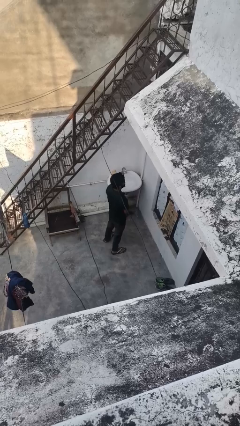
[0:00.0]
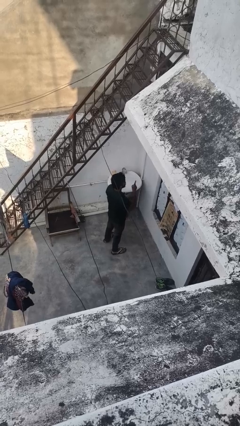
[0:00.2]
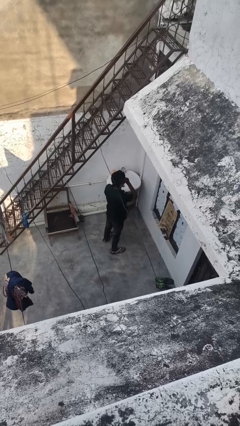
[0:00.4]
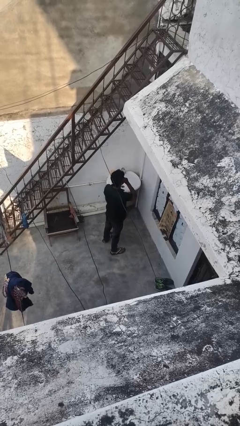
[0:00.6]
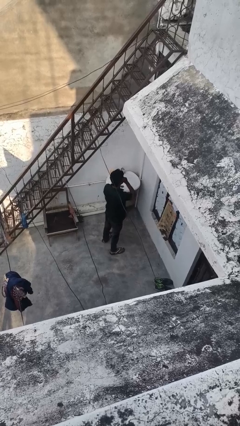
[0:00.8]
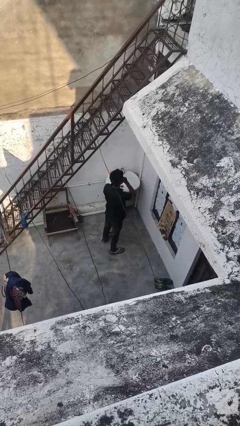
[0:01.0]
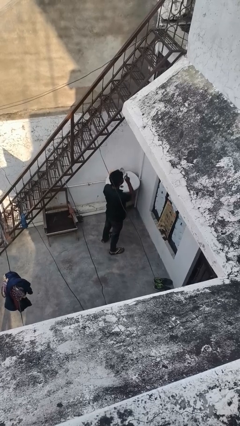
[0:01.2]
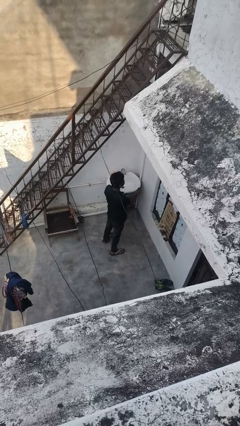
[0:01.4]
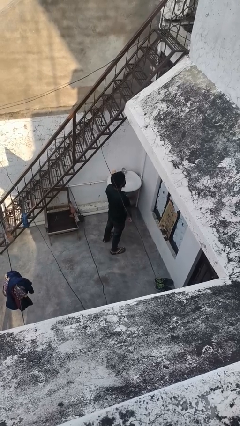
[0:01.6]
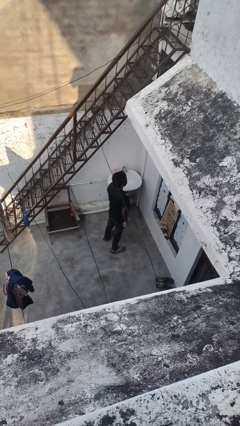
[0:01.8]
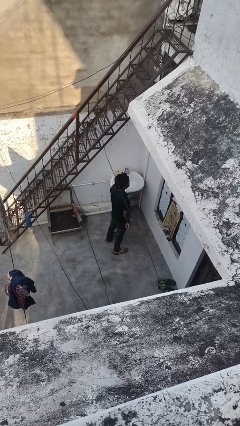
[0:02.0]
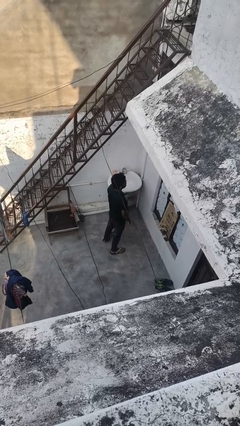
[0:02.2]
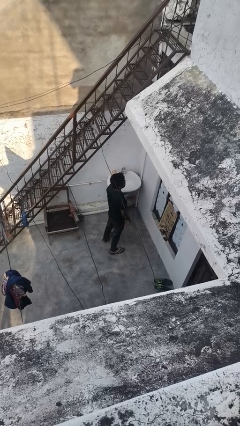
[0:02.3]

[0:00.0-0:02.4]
person gestures be quiet

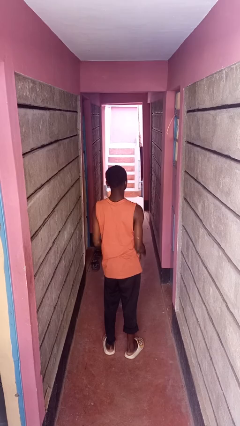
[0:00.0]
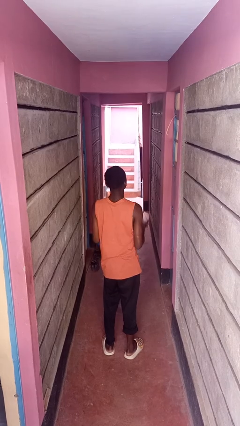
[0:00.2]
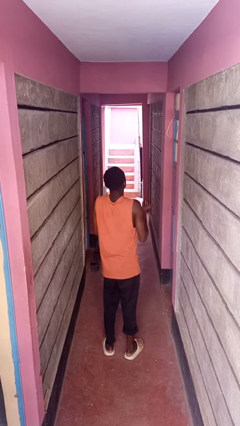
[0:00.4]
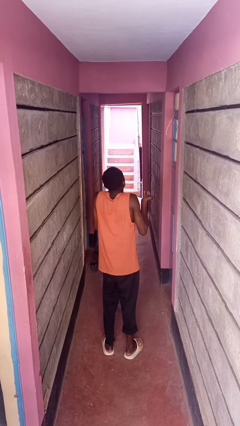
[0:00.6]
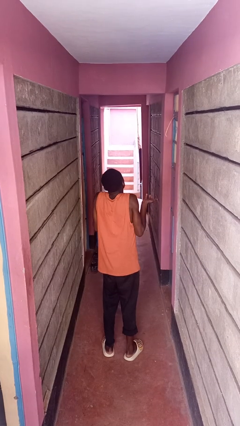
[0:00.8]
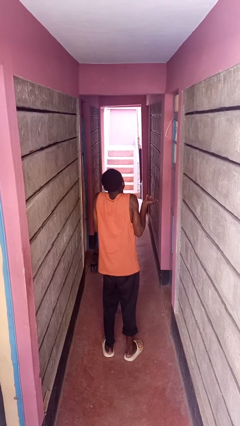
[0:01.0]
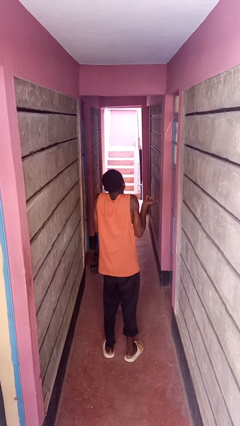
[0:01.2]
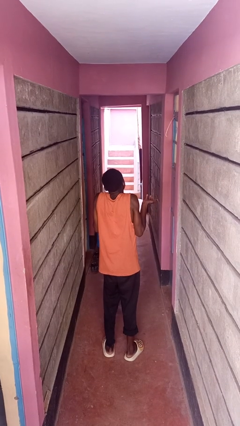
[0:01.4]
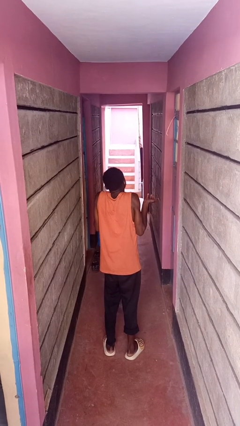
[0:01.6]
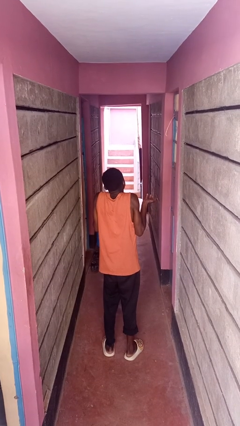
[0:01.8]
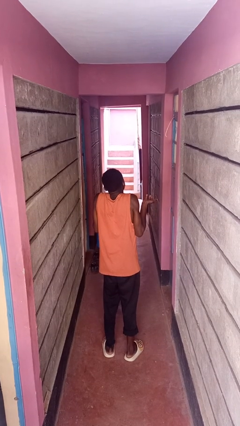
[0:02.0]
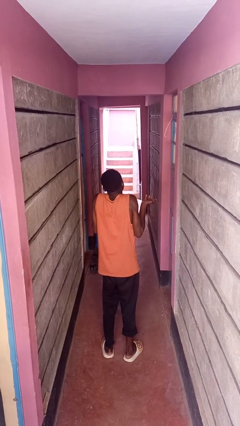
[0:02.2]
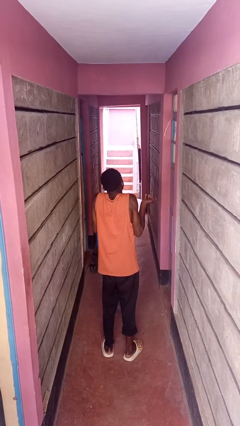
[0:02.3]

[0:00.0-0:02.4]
person shrugs

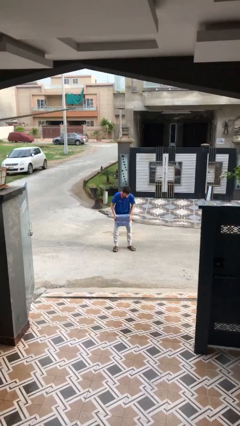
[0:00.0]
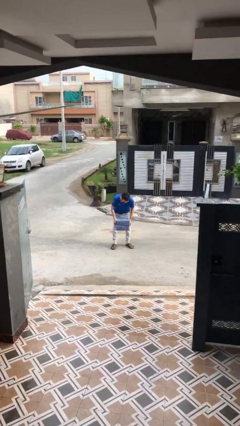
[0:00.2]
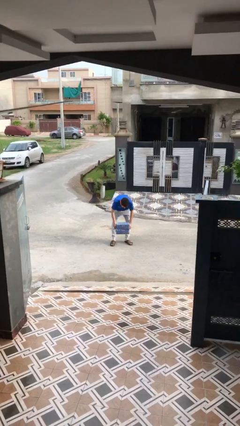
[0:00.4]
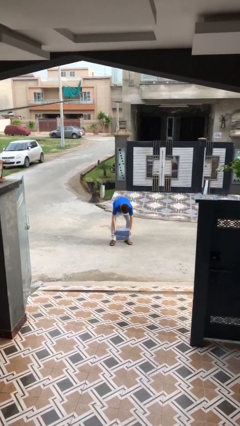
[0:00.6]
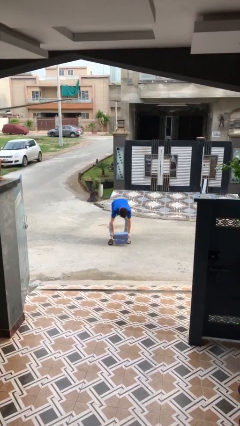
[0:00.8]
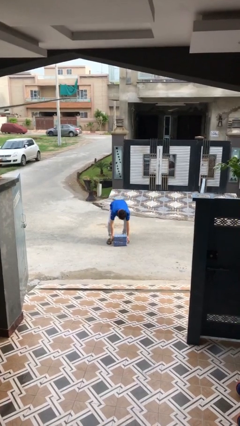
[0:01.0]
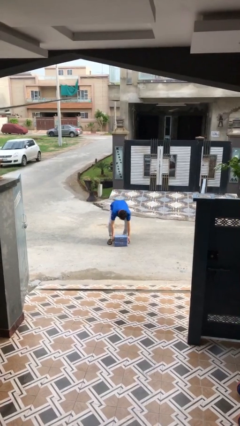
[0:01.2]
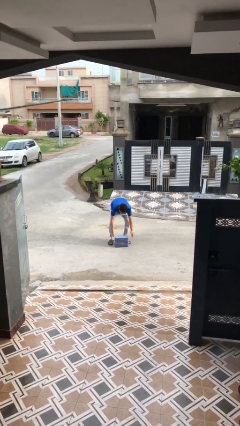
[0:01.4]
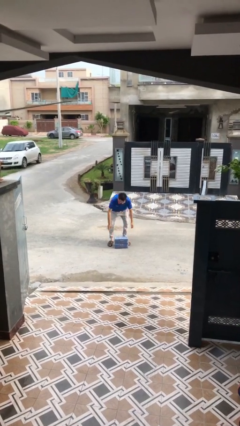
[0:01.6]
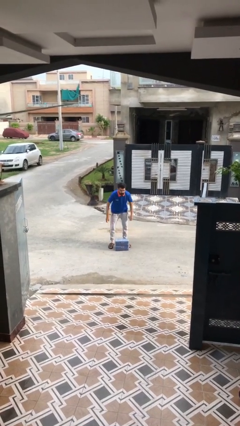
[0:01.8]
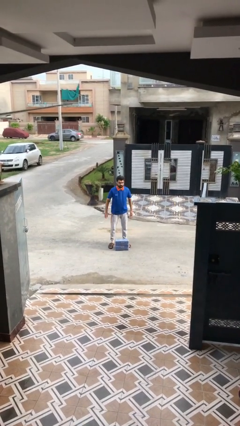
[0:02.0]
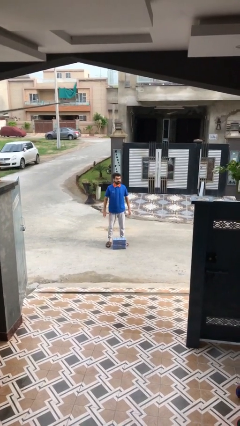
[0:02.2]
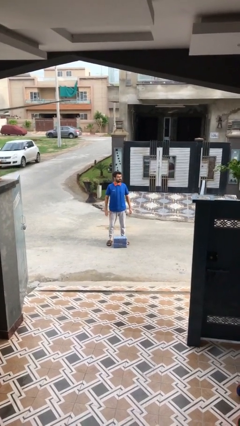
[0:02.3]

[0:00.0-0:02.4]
person puts down object on floor

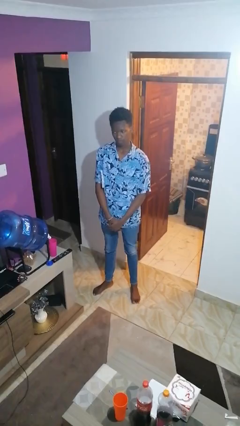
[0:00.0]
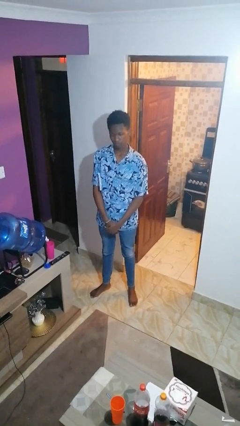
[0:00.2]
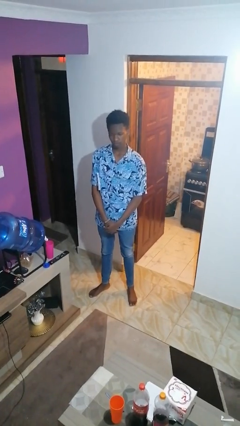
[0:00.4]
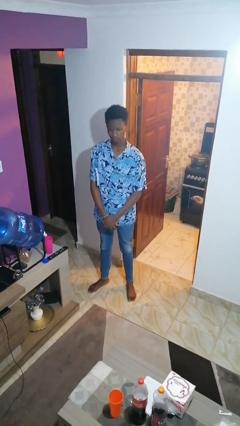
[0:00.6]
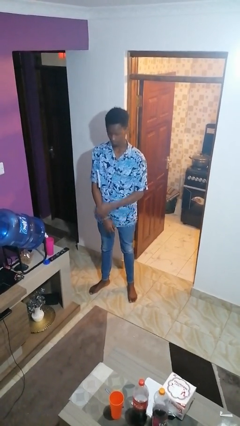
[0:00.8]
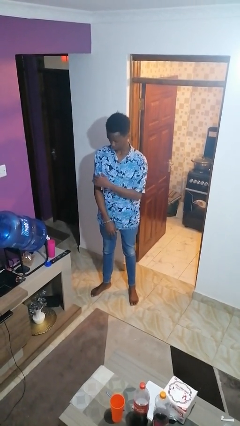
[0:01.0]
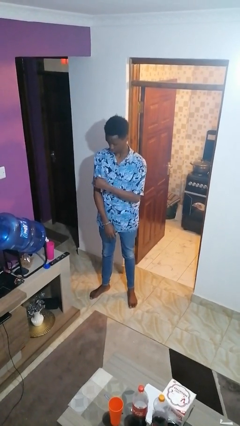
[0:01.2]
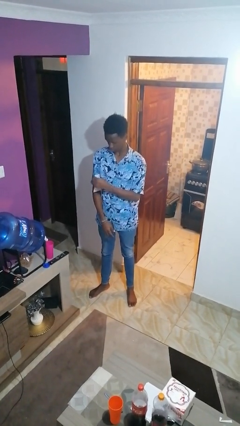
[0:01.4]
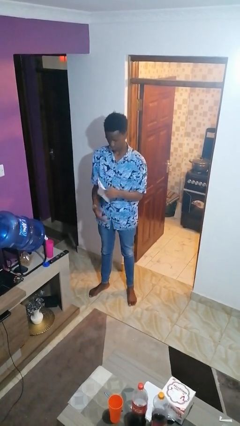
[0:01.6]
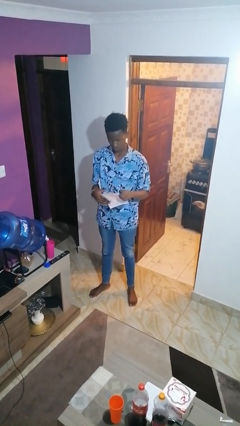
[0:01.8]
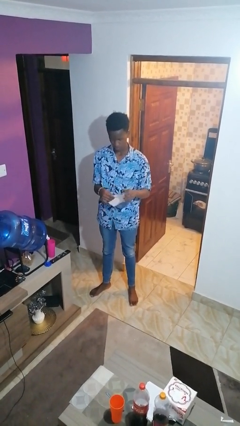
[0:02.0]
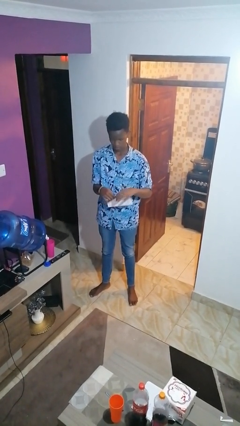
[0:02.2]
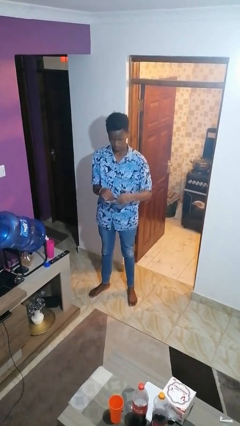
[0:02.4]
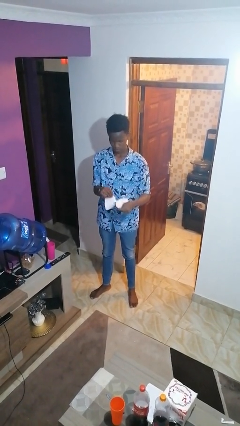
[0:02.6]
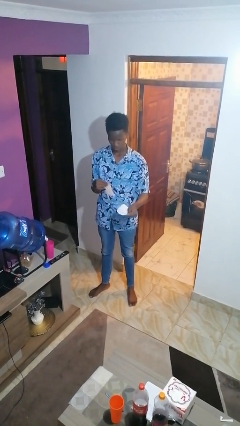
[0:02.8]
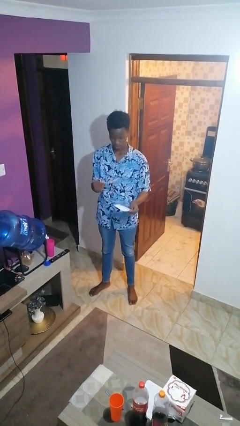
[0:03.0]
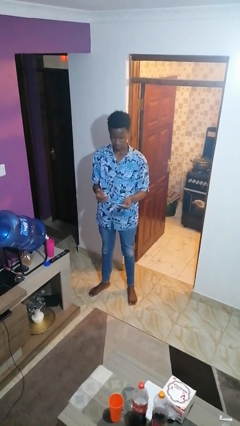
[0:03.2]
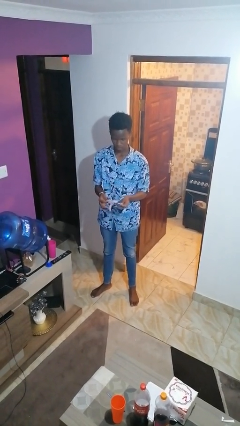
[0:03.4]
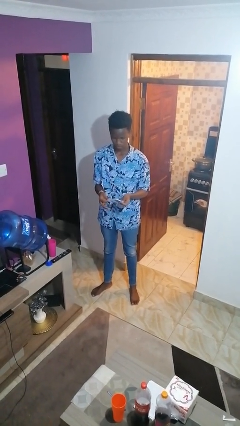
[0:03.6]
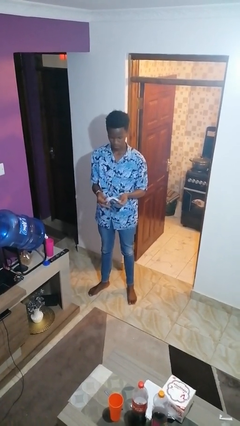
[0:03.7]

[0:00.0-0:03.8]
person tears paper

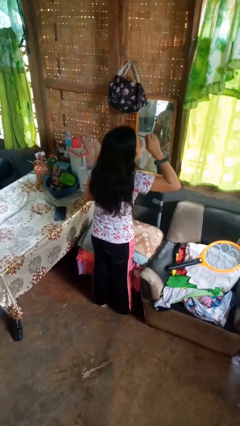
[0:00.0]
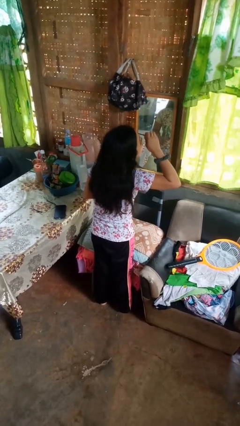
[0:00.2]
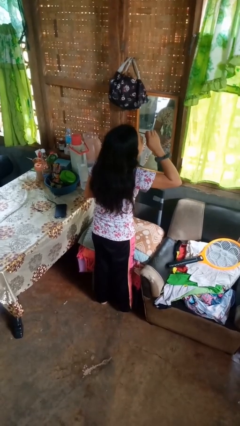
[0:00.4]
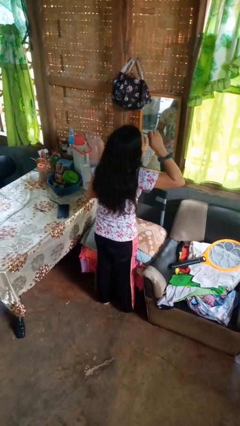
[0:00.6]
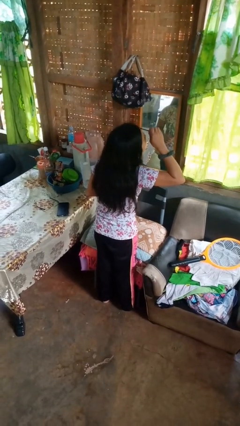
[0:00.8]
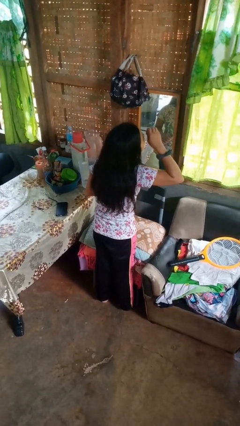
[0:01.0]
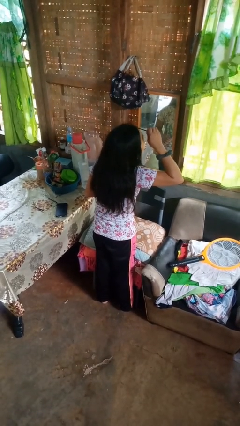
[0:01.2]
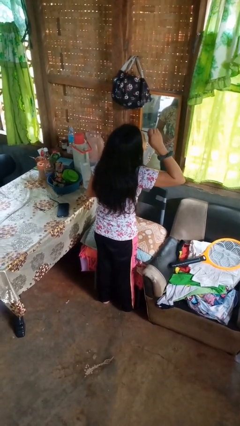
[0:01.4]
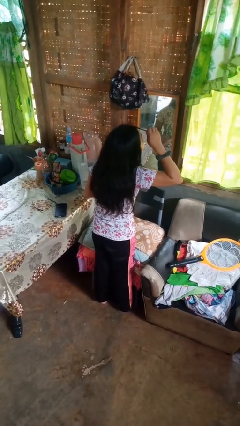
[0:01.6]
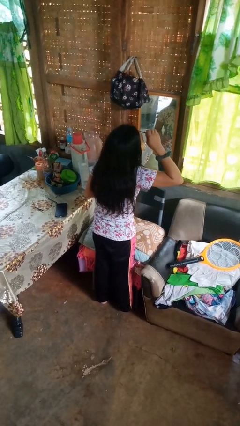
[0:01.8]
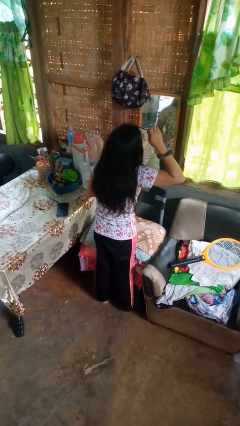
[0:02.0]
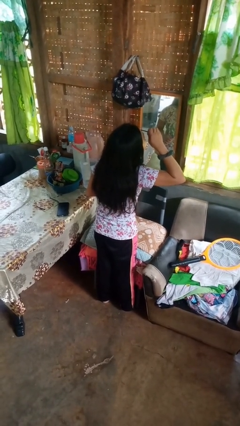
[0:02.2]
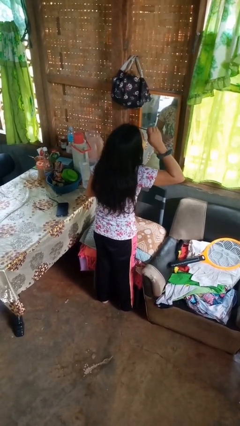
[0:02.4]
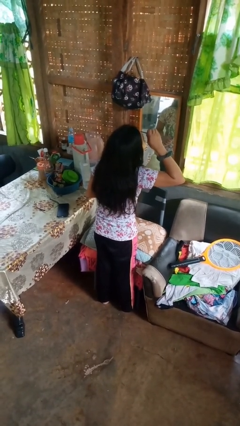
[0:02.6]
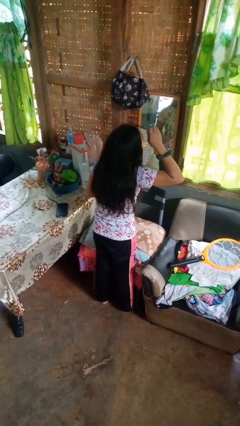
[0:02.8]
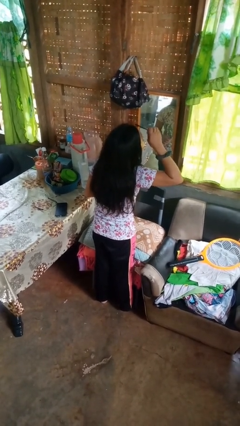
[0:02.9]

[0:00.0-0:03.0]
person applies eye makeup

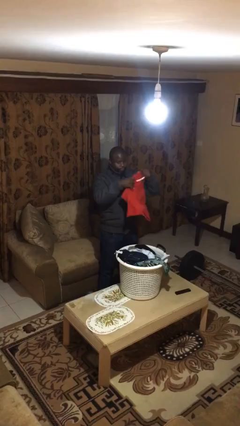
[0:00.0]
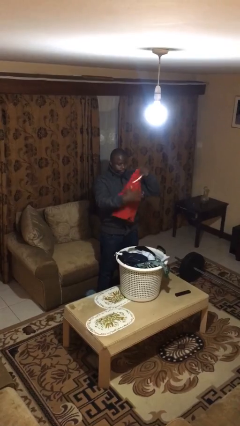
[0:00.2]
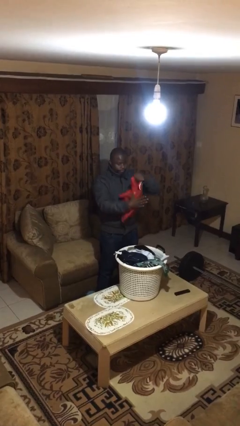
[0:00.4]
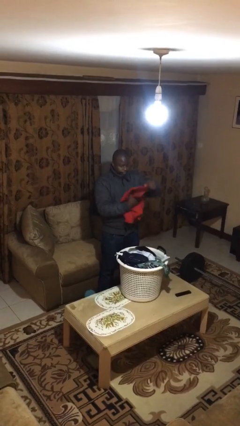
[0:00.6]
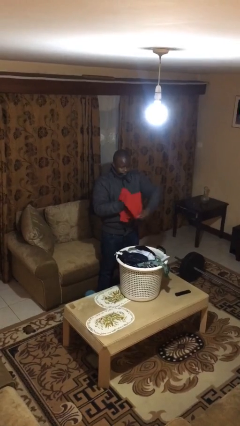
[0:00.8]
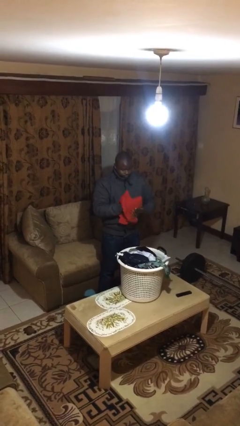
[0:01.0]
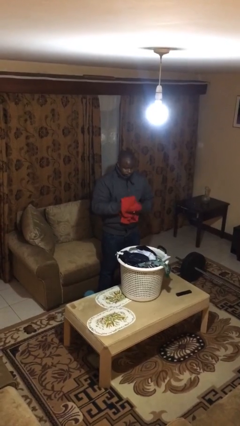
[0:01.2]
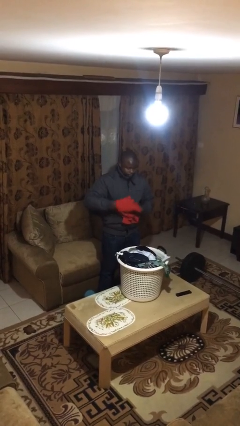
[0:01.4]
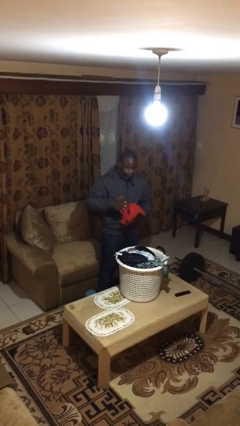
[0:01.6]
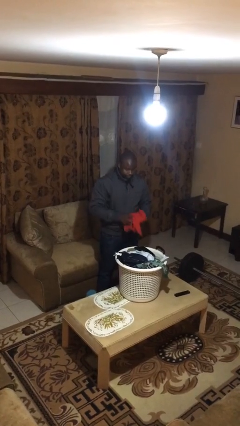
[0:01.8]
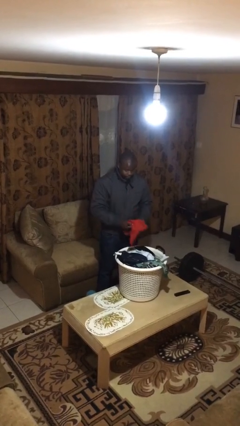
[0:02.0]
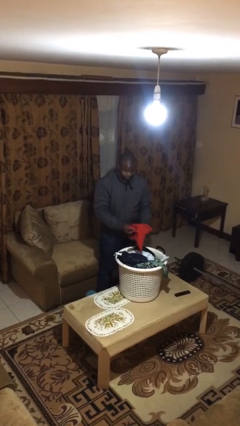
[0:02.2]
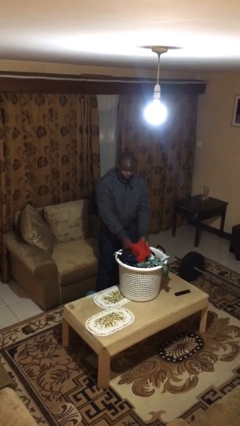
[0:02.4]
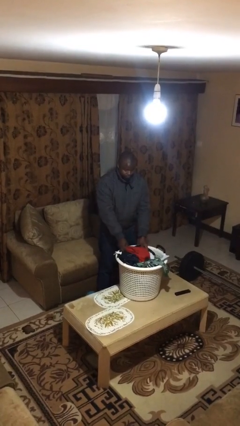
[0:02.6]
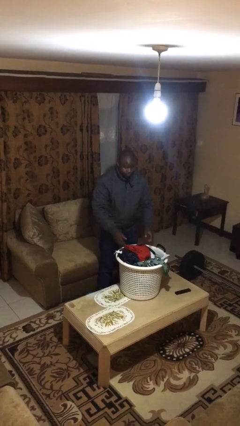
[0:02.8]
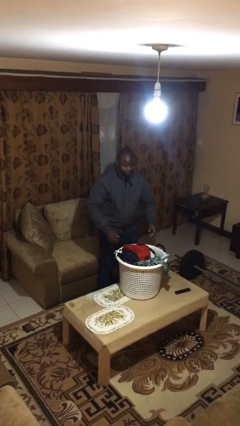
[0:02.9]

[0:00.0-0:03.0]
person folds shirt

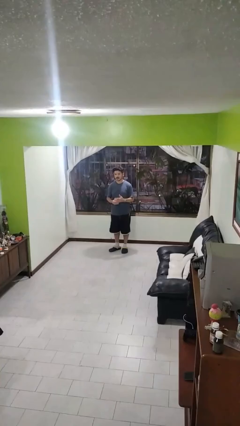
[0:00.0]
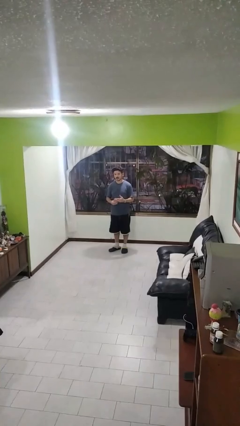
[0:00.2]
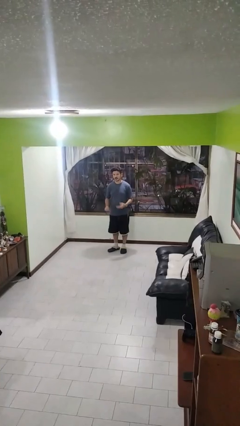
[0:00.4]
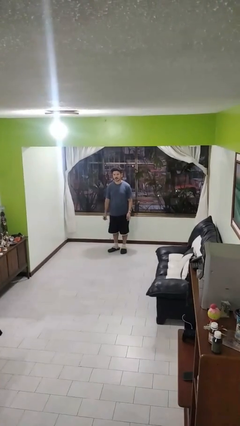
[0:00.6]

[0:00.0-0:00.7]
person takes off ring
